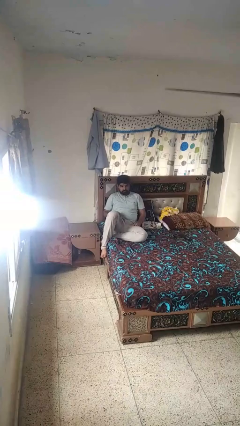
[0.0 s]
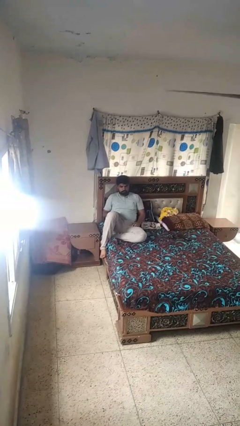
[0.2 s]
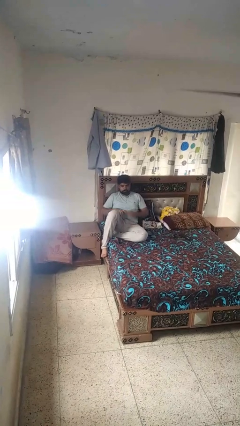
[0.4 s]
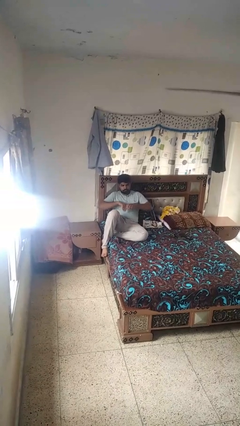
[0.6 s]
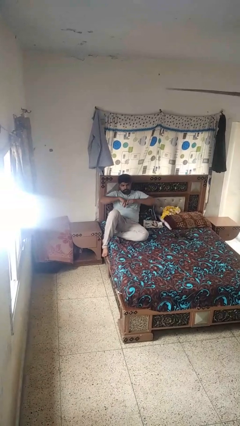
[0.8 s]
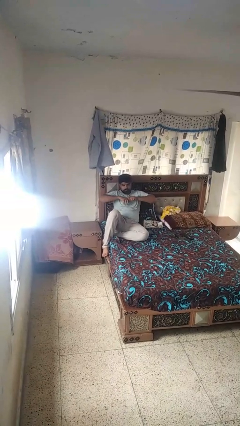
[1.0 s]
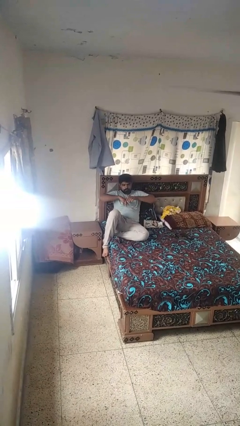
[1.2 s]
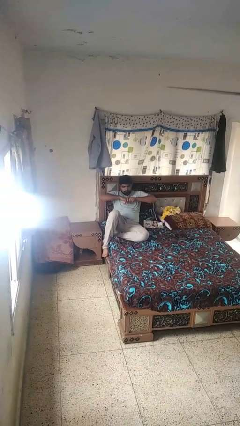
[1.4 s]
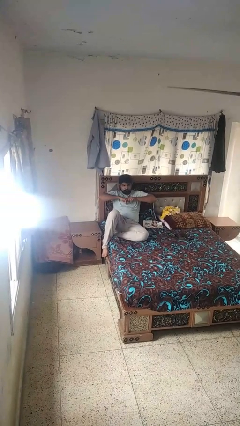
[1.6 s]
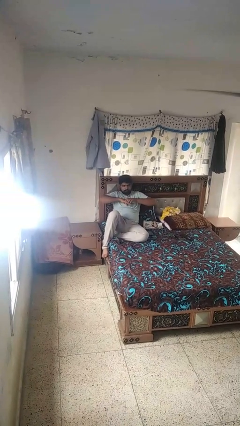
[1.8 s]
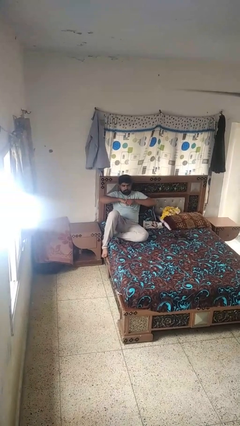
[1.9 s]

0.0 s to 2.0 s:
person cracks knuckles

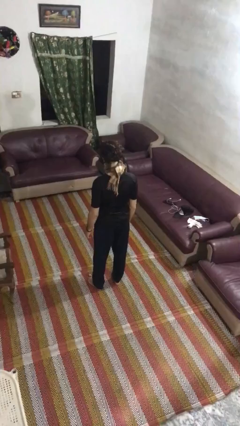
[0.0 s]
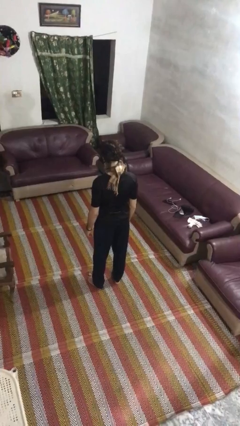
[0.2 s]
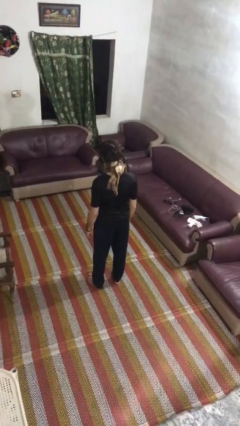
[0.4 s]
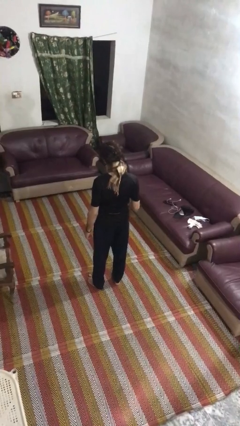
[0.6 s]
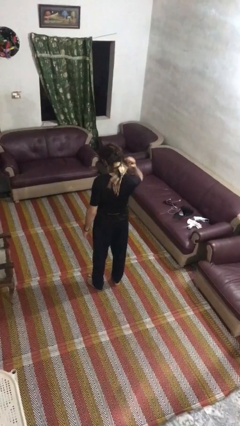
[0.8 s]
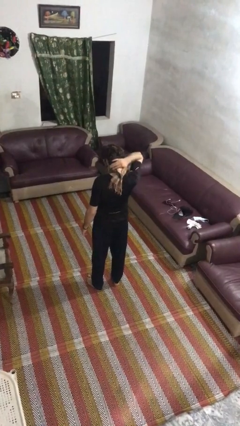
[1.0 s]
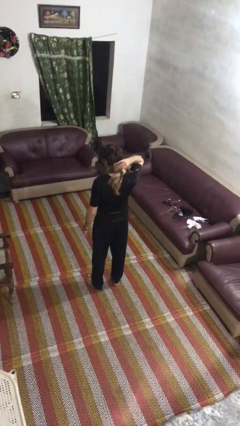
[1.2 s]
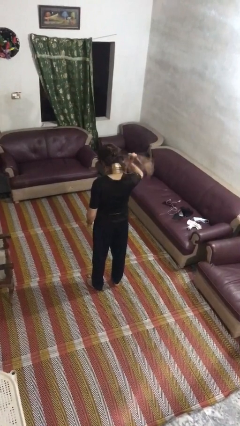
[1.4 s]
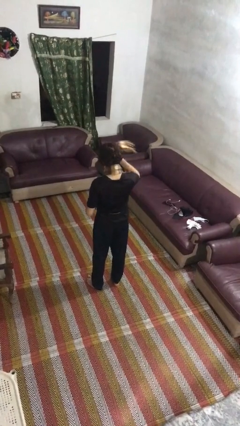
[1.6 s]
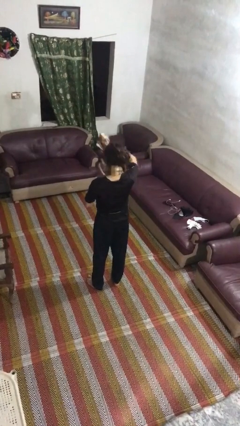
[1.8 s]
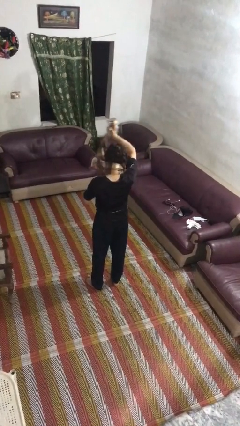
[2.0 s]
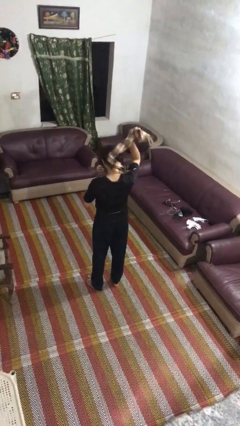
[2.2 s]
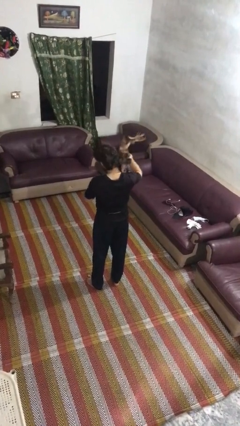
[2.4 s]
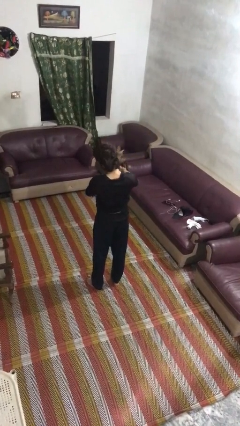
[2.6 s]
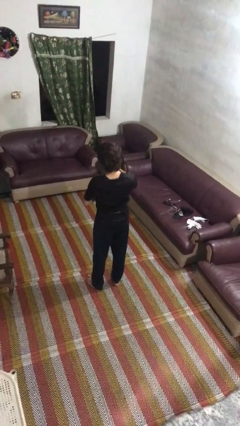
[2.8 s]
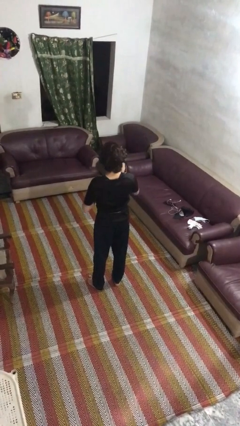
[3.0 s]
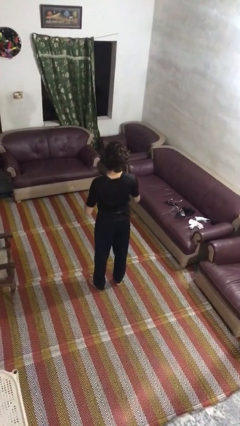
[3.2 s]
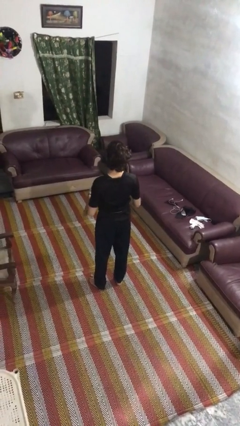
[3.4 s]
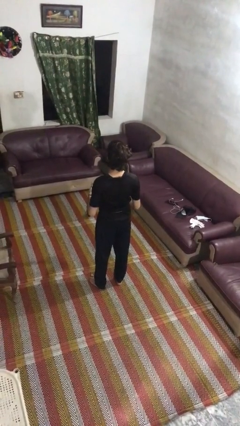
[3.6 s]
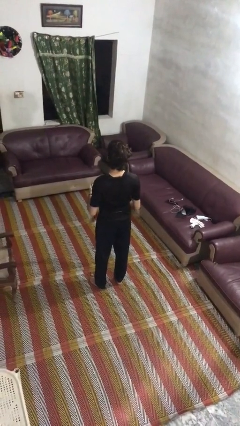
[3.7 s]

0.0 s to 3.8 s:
person takes off scarf

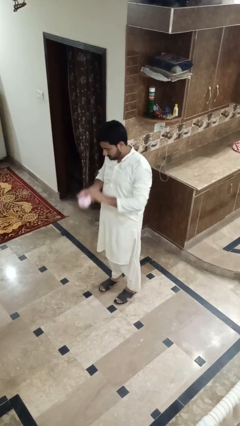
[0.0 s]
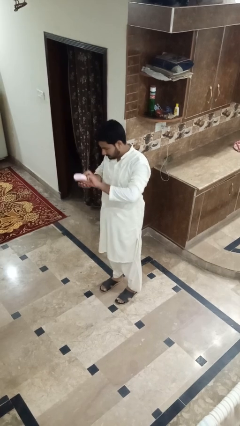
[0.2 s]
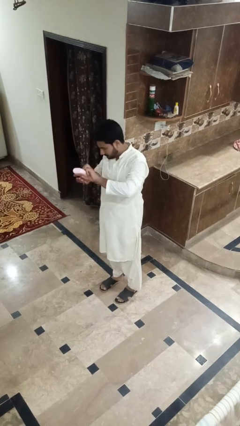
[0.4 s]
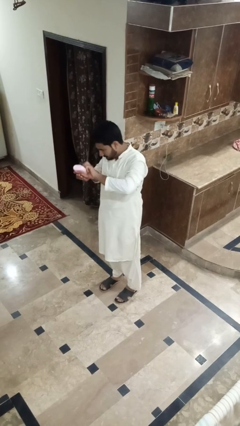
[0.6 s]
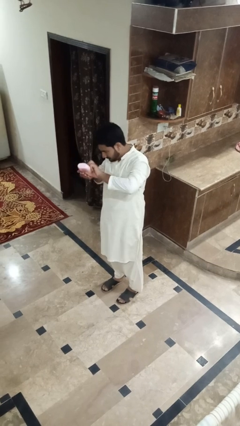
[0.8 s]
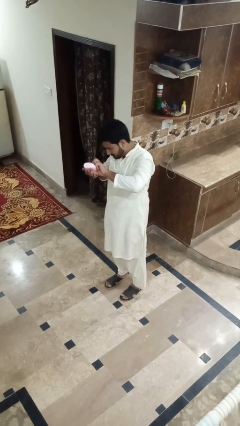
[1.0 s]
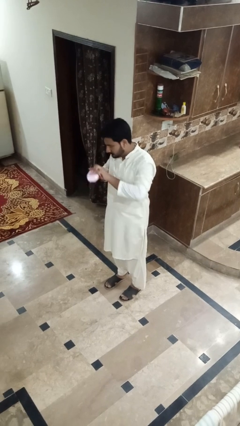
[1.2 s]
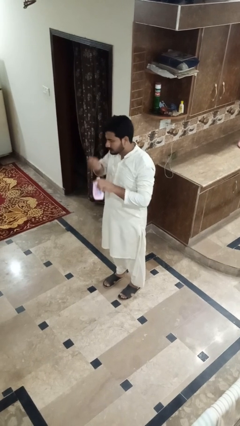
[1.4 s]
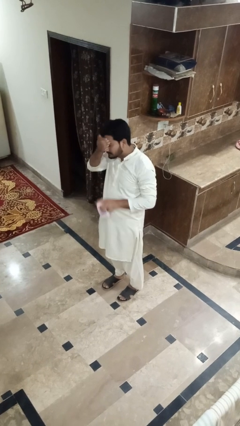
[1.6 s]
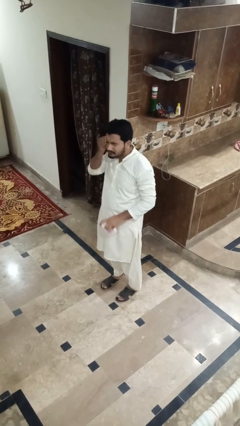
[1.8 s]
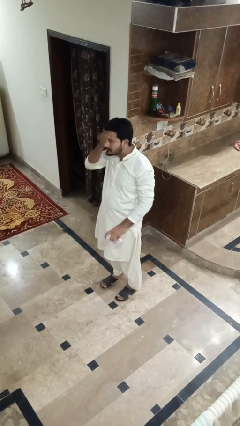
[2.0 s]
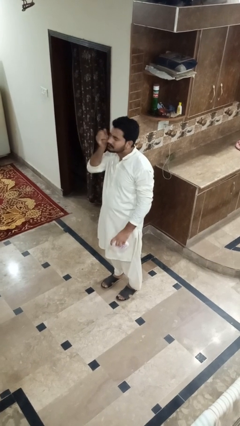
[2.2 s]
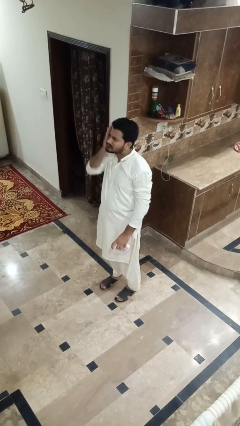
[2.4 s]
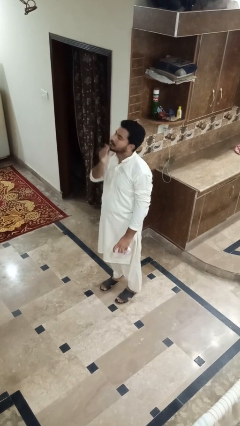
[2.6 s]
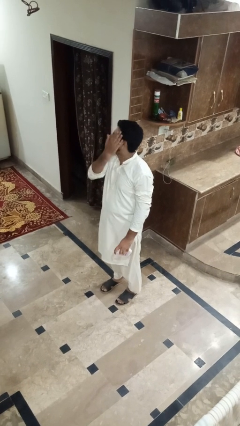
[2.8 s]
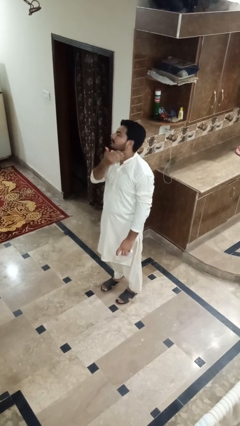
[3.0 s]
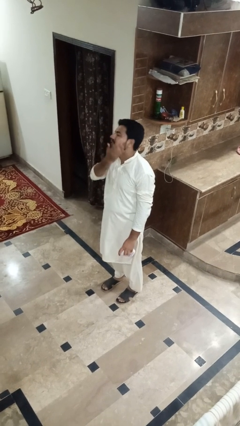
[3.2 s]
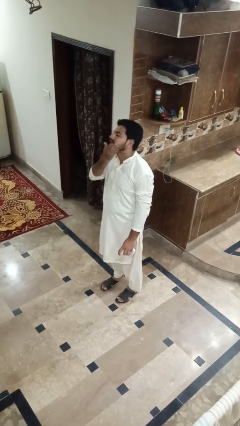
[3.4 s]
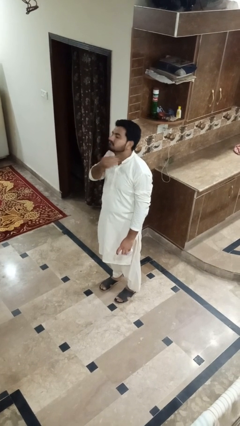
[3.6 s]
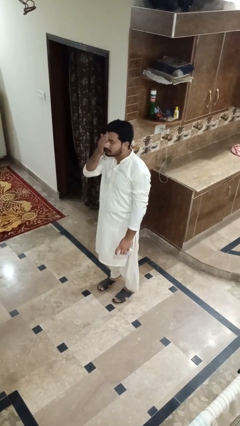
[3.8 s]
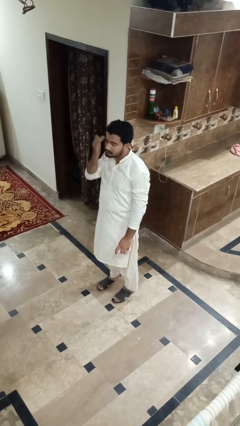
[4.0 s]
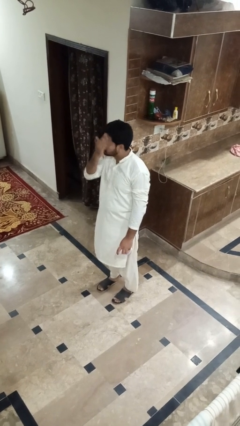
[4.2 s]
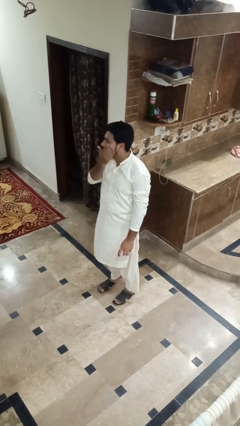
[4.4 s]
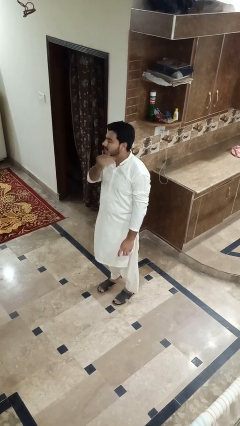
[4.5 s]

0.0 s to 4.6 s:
person applies facial moisturizer

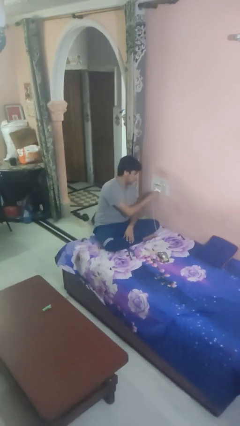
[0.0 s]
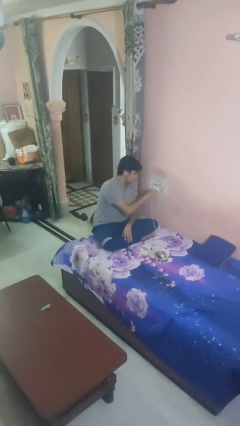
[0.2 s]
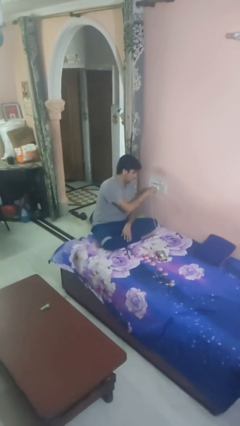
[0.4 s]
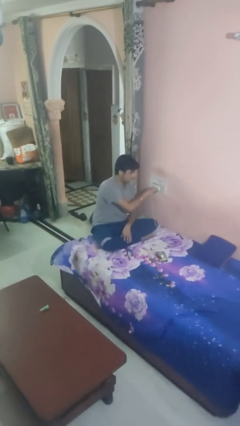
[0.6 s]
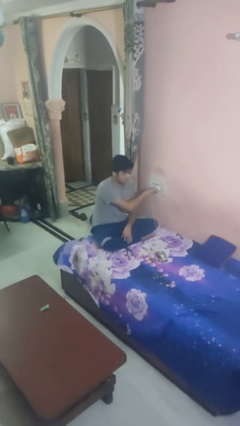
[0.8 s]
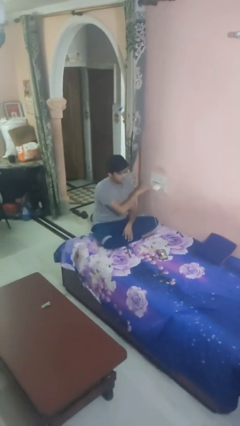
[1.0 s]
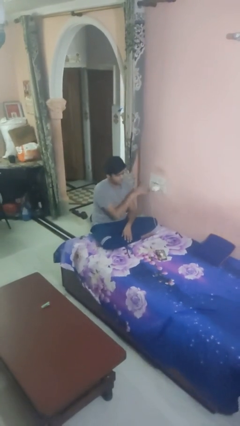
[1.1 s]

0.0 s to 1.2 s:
person plugs into electrical socket

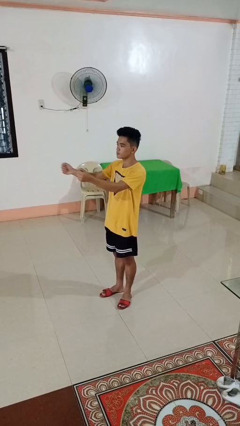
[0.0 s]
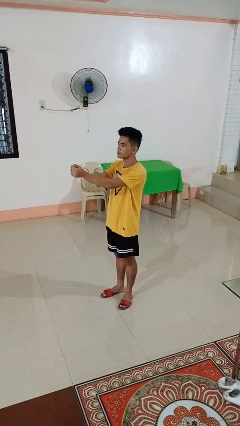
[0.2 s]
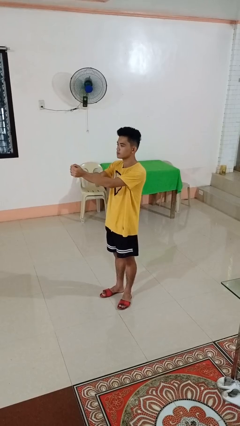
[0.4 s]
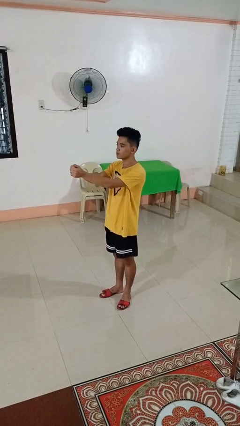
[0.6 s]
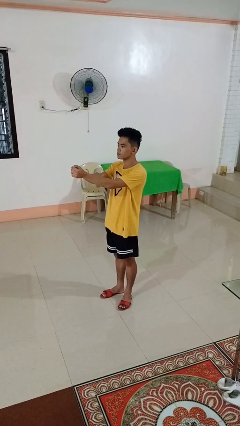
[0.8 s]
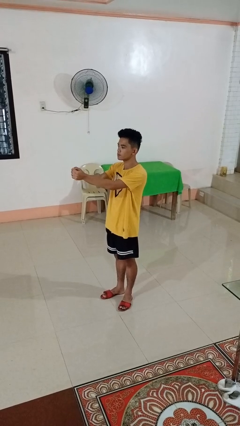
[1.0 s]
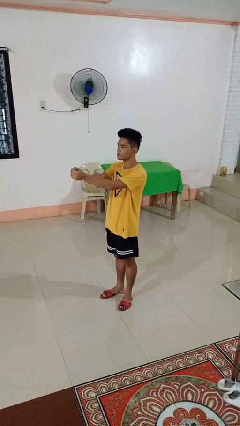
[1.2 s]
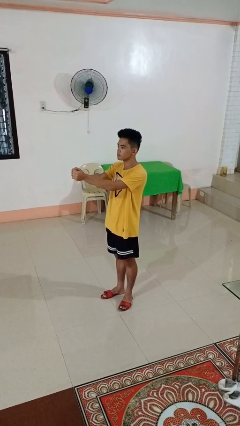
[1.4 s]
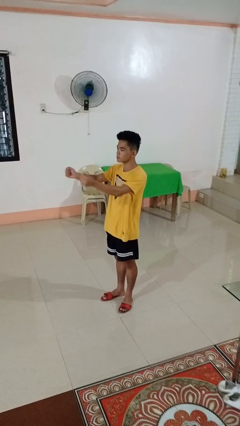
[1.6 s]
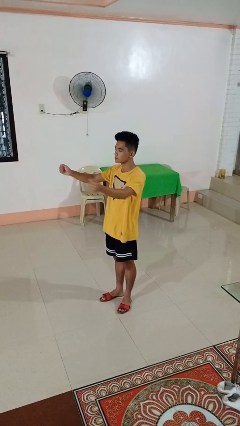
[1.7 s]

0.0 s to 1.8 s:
person gestures zoom in

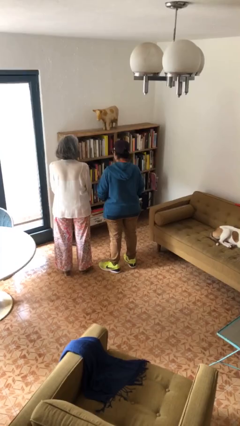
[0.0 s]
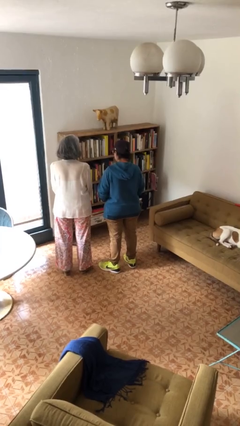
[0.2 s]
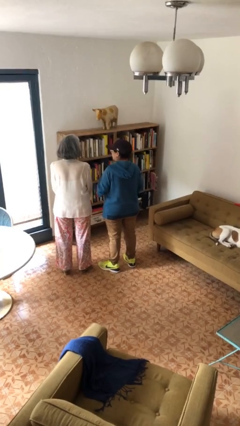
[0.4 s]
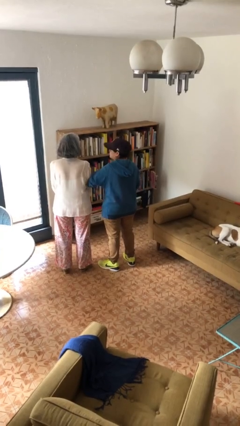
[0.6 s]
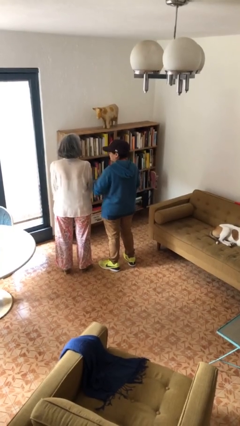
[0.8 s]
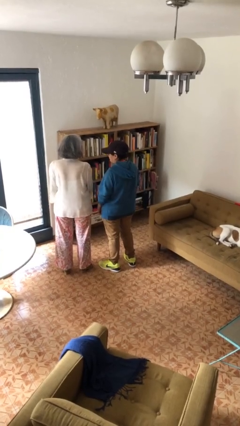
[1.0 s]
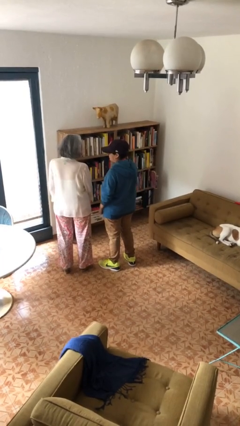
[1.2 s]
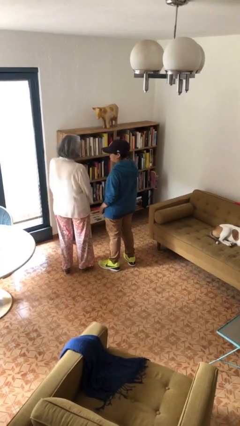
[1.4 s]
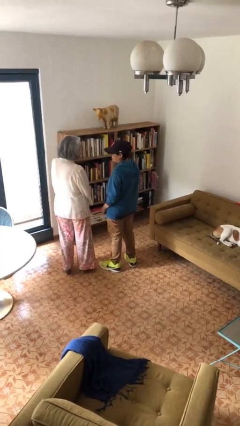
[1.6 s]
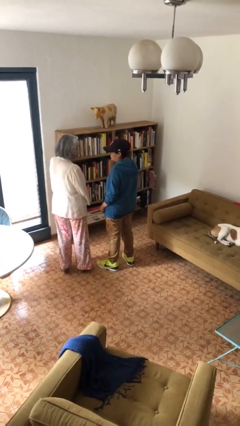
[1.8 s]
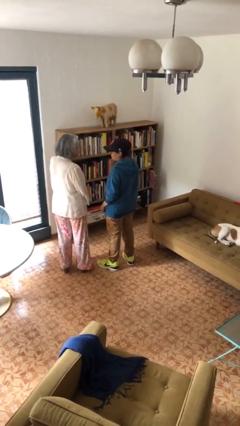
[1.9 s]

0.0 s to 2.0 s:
person nudges person with elbow

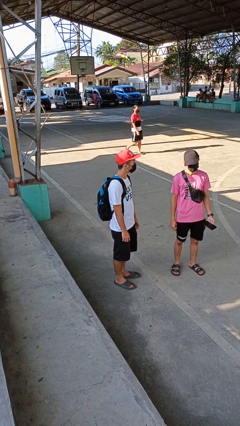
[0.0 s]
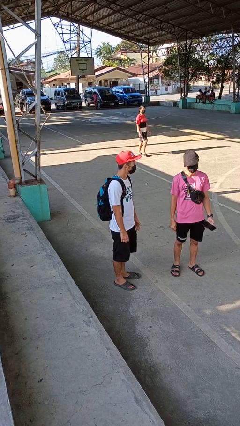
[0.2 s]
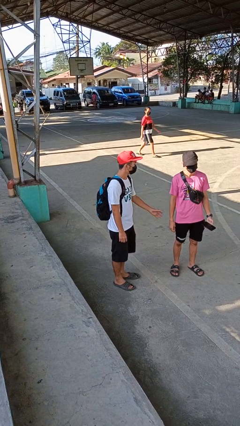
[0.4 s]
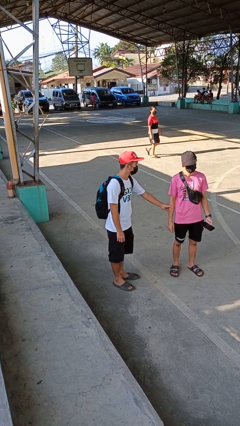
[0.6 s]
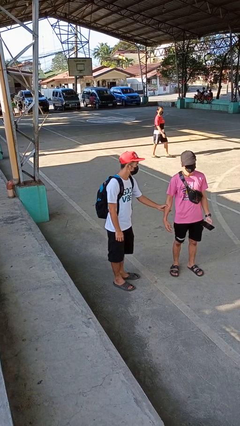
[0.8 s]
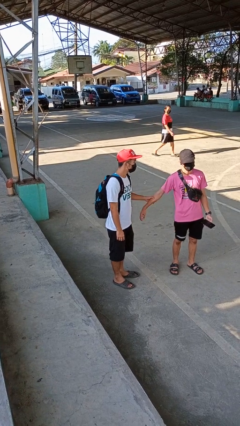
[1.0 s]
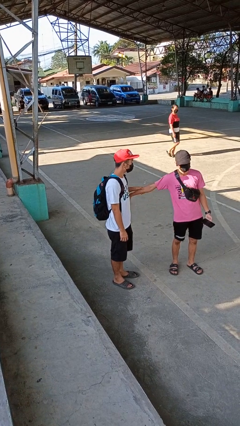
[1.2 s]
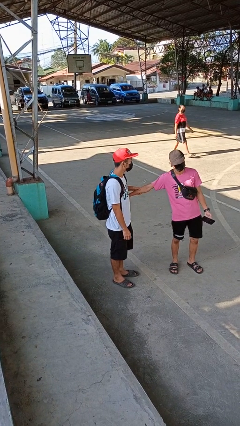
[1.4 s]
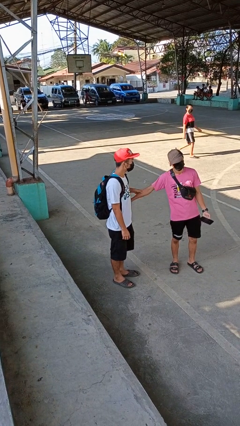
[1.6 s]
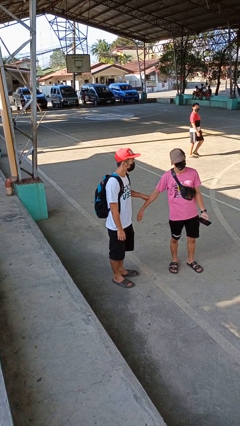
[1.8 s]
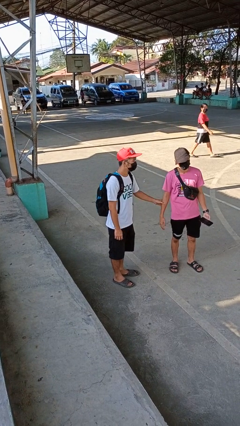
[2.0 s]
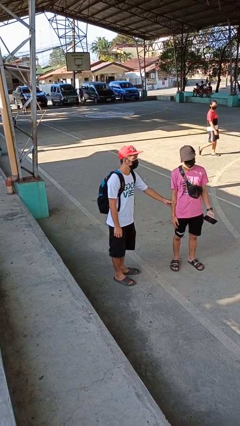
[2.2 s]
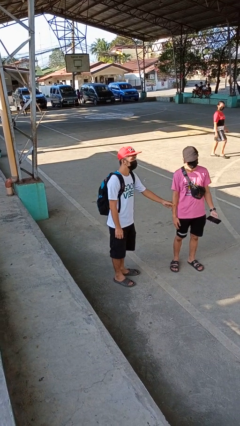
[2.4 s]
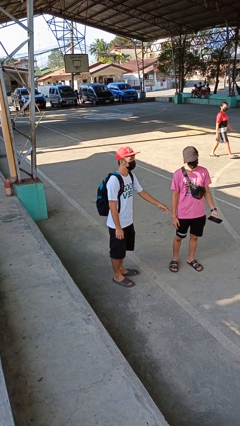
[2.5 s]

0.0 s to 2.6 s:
person grabs person by forearm
